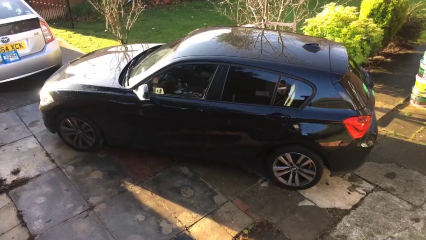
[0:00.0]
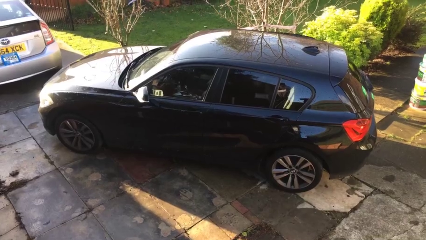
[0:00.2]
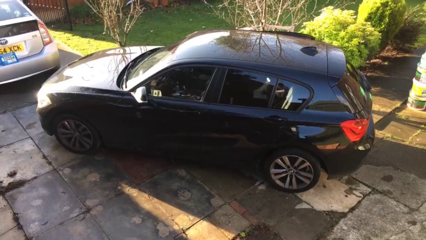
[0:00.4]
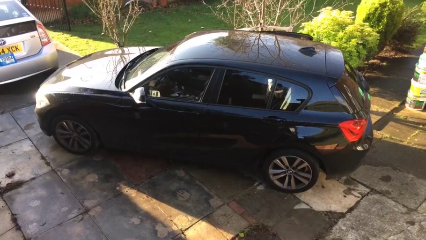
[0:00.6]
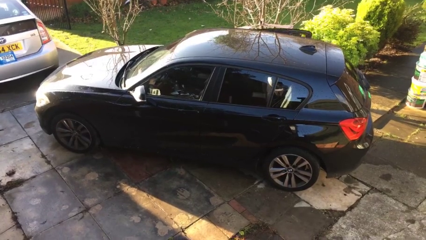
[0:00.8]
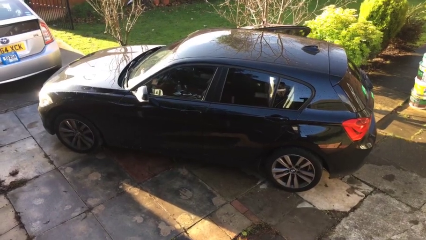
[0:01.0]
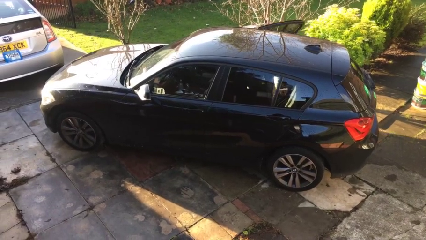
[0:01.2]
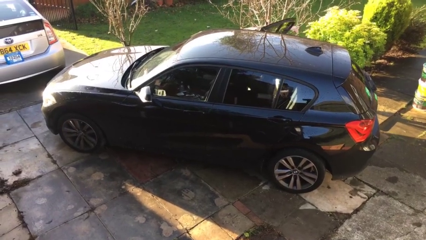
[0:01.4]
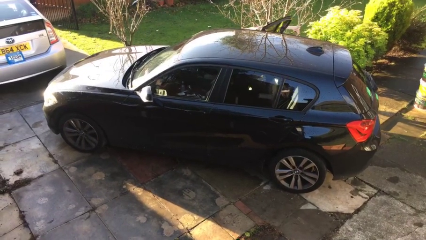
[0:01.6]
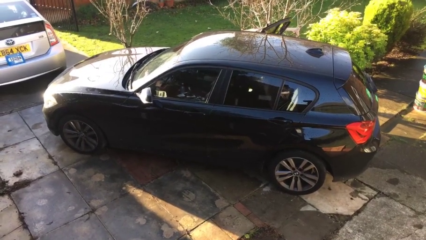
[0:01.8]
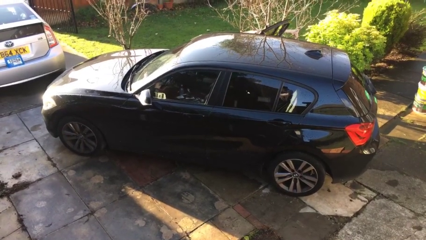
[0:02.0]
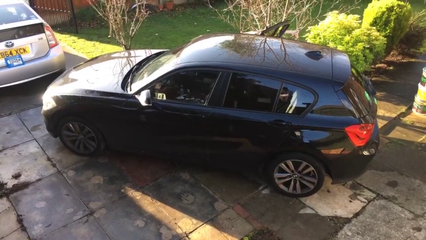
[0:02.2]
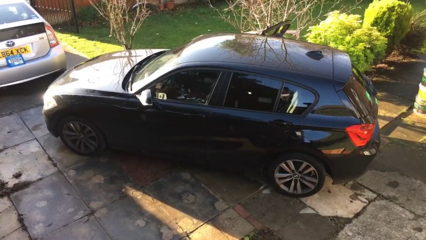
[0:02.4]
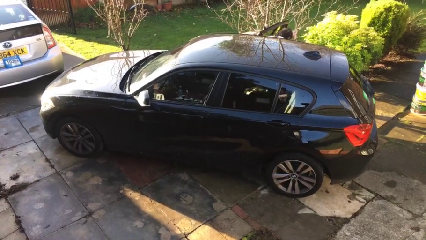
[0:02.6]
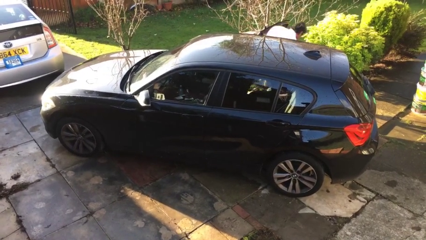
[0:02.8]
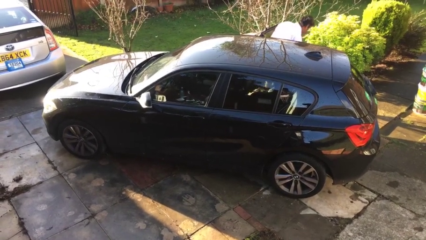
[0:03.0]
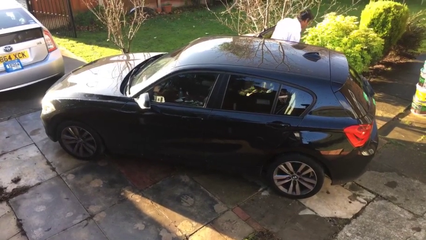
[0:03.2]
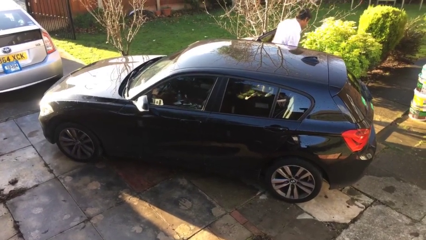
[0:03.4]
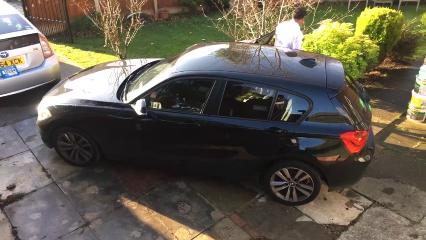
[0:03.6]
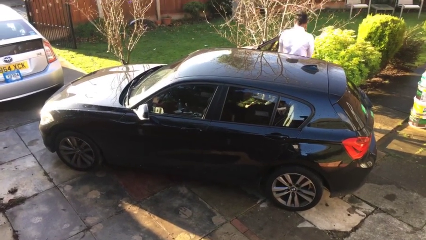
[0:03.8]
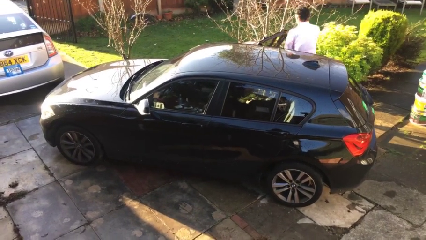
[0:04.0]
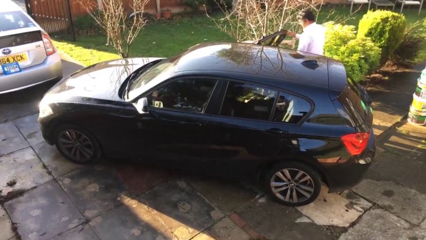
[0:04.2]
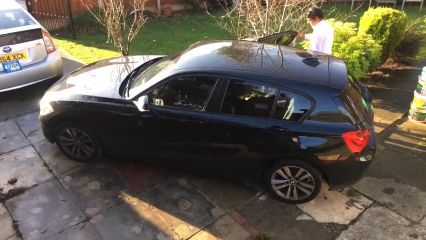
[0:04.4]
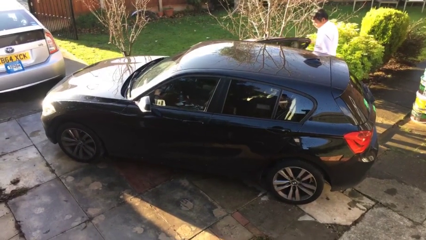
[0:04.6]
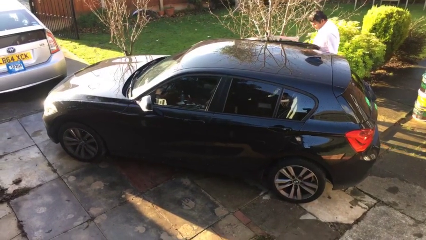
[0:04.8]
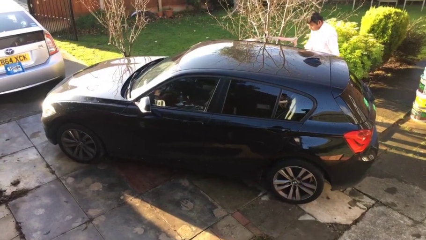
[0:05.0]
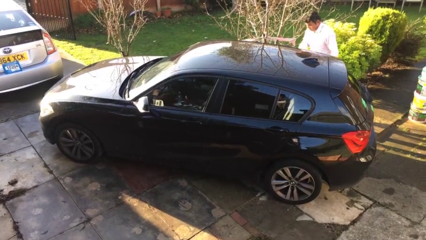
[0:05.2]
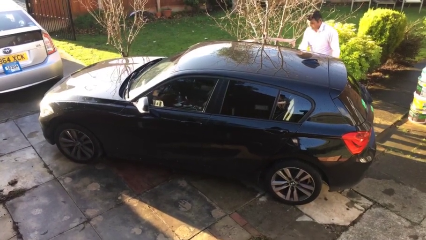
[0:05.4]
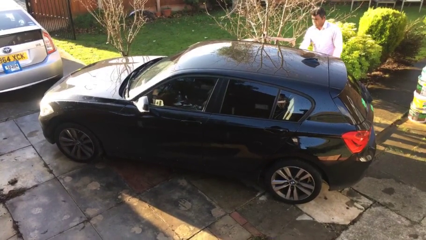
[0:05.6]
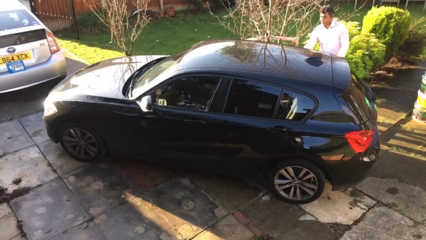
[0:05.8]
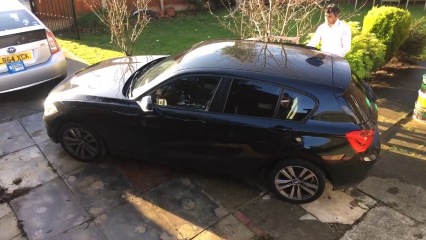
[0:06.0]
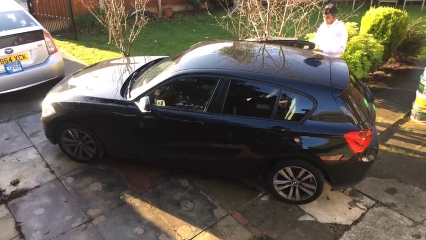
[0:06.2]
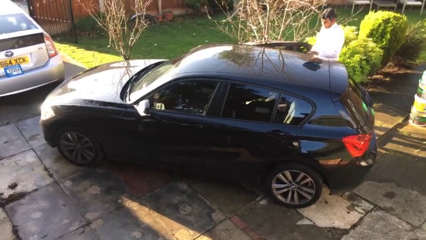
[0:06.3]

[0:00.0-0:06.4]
car drops off person

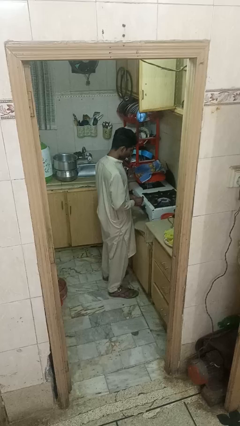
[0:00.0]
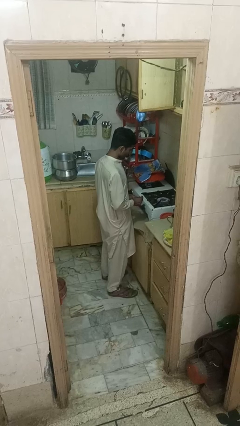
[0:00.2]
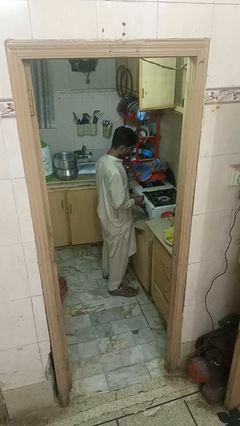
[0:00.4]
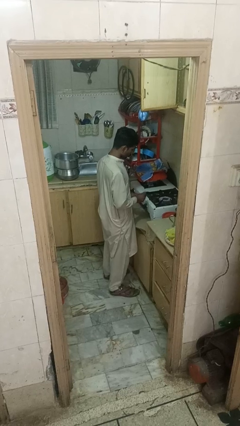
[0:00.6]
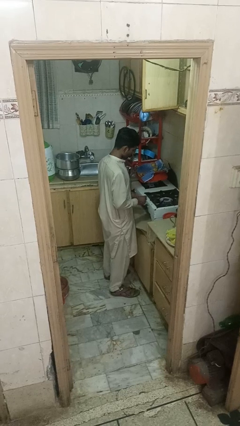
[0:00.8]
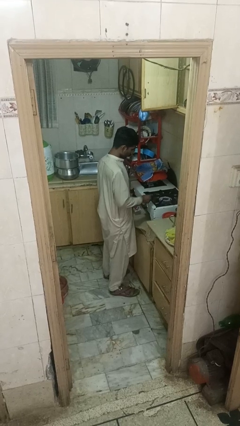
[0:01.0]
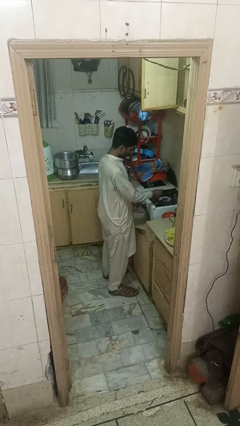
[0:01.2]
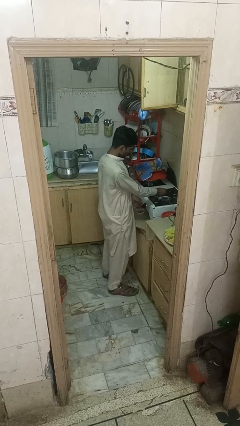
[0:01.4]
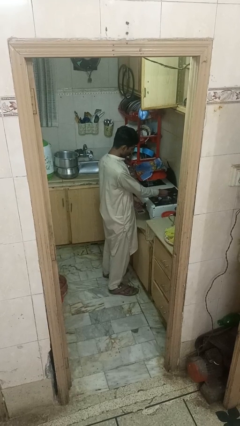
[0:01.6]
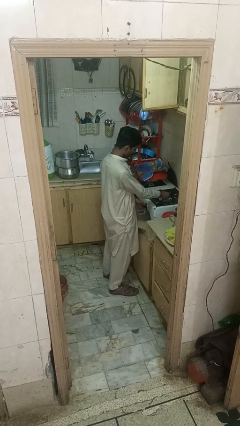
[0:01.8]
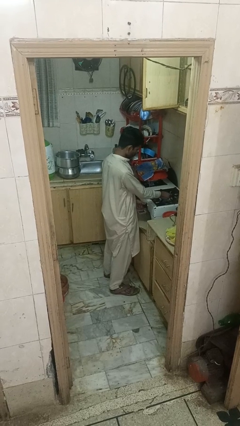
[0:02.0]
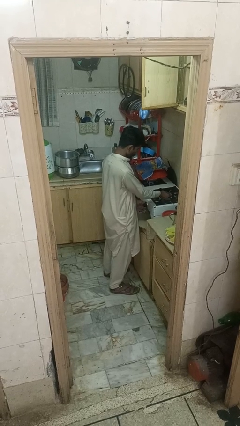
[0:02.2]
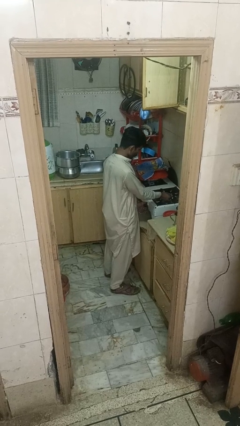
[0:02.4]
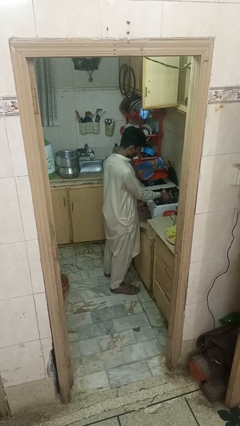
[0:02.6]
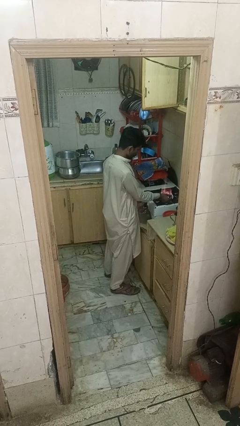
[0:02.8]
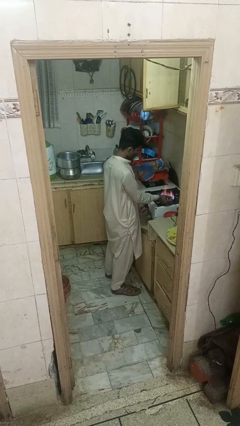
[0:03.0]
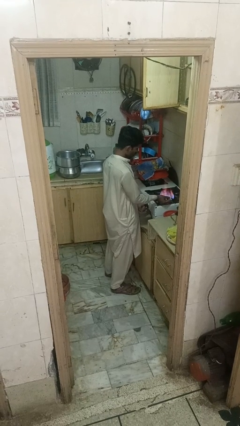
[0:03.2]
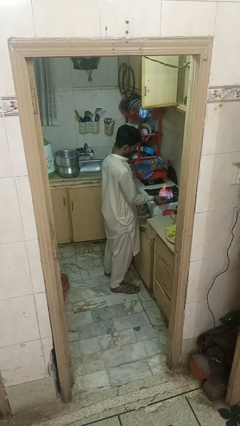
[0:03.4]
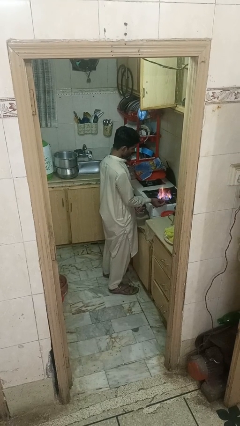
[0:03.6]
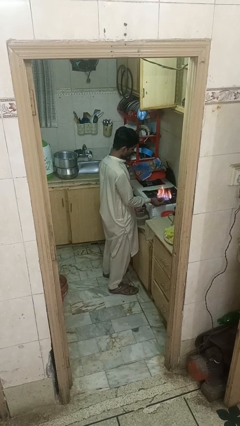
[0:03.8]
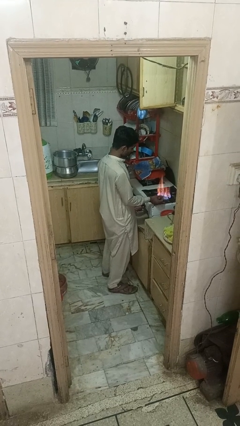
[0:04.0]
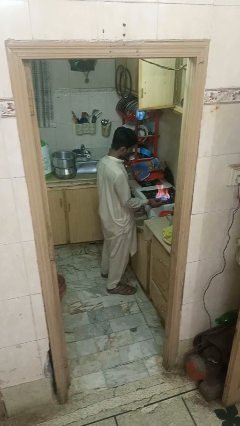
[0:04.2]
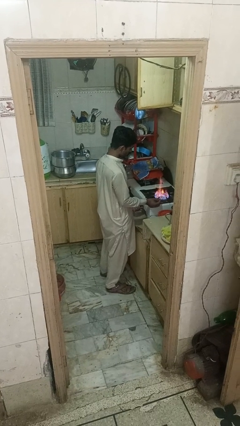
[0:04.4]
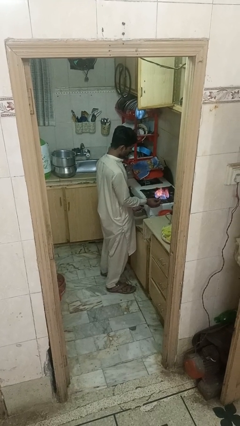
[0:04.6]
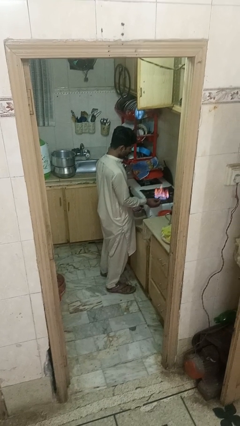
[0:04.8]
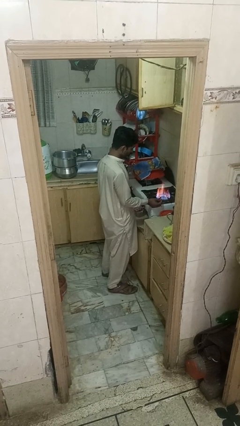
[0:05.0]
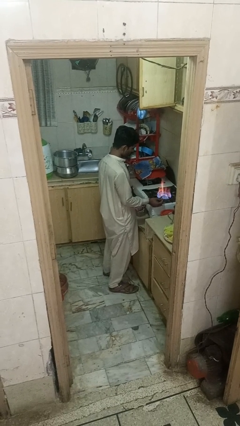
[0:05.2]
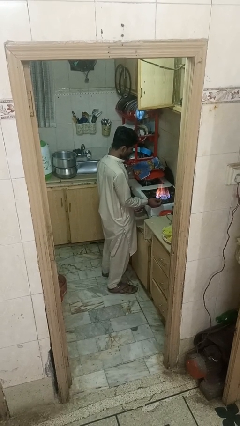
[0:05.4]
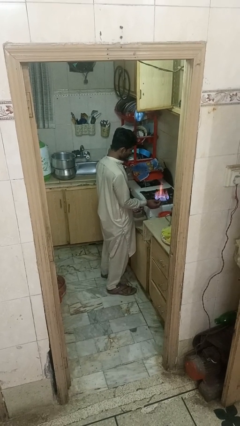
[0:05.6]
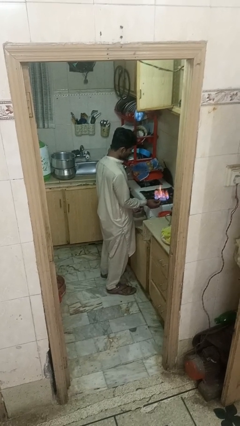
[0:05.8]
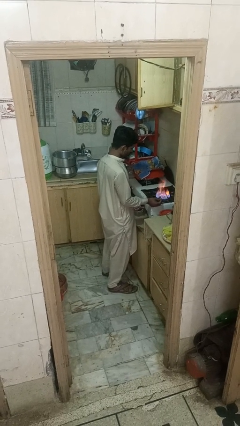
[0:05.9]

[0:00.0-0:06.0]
person turns on stovetop

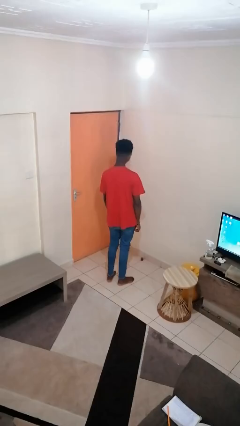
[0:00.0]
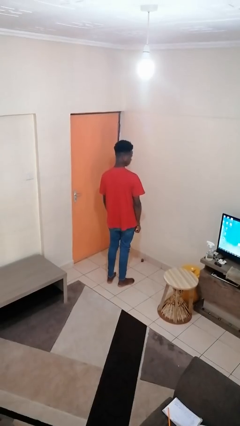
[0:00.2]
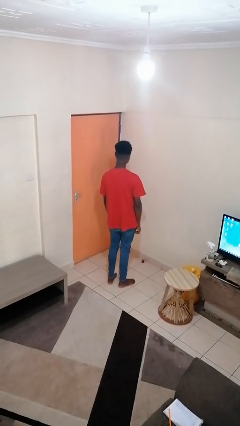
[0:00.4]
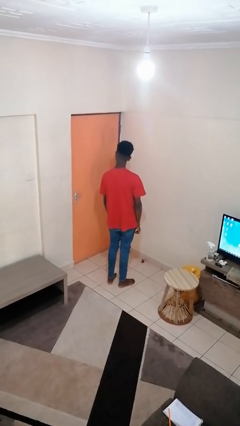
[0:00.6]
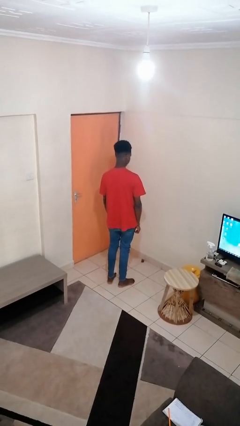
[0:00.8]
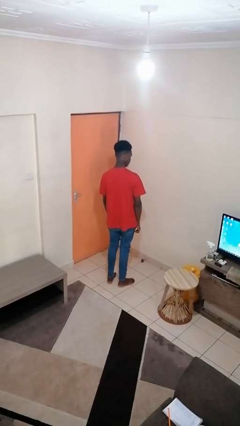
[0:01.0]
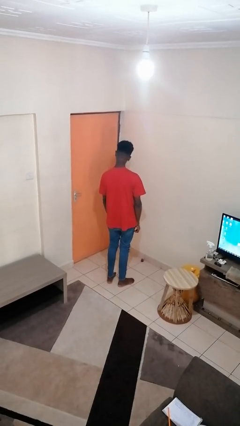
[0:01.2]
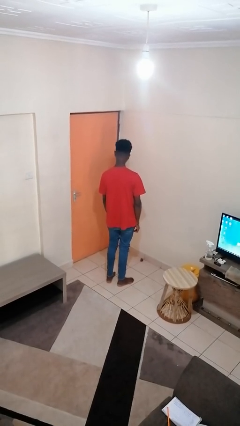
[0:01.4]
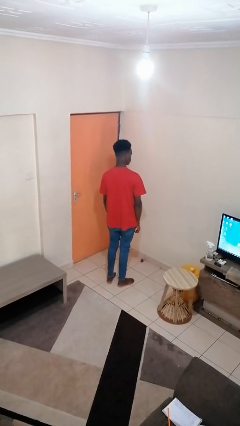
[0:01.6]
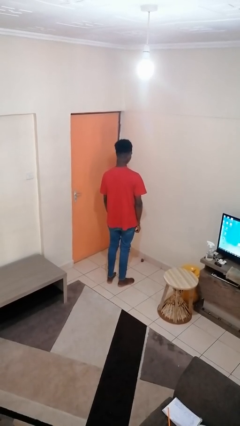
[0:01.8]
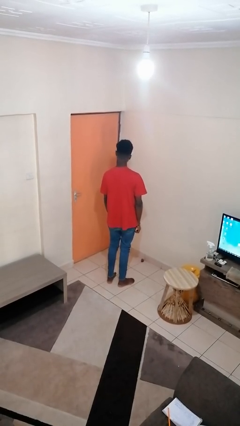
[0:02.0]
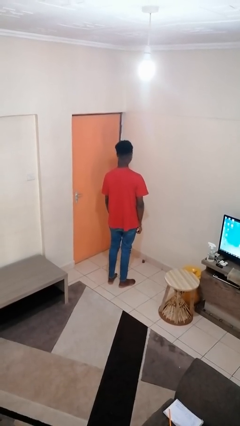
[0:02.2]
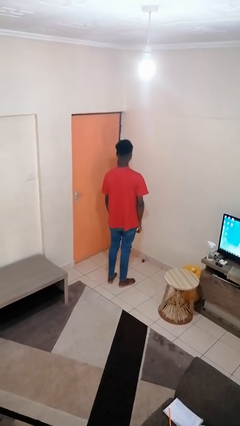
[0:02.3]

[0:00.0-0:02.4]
person shakes head

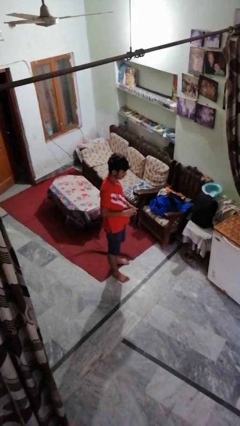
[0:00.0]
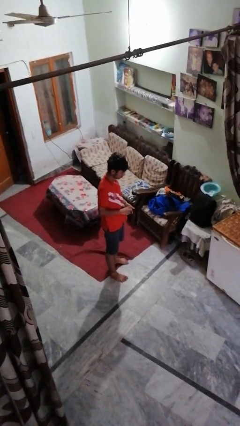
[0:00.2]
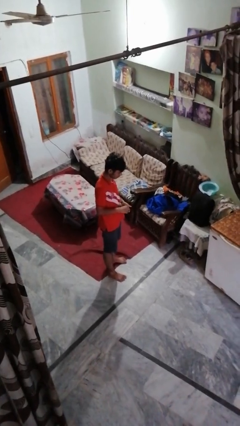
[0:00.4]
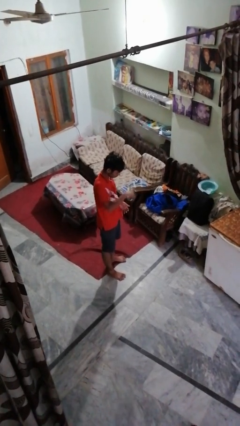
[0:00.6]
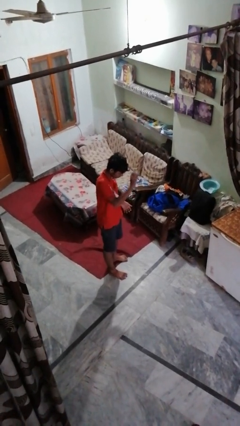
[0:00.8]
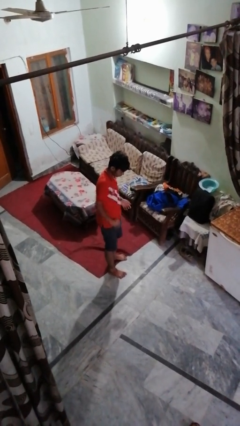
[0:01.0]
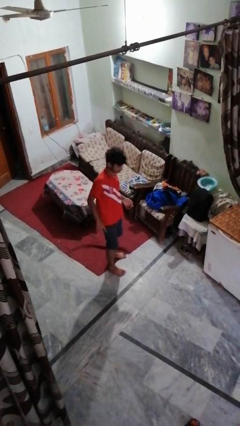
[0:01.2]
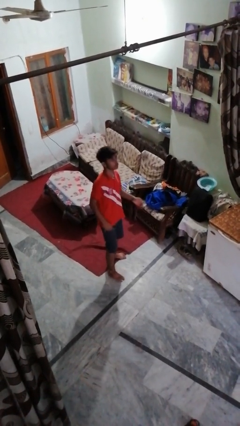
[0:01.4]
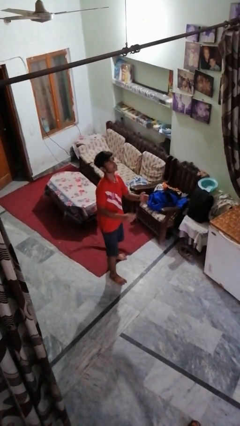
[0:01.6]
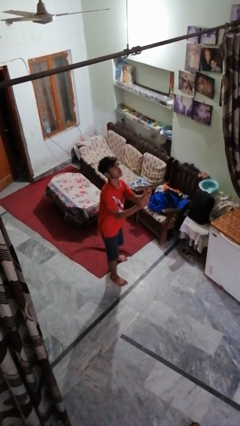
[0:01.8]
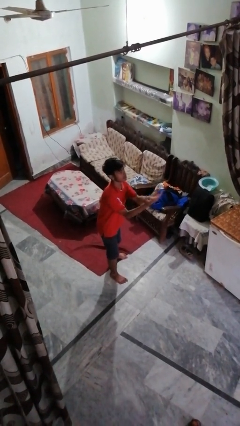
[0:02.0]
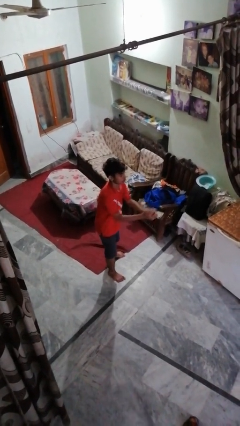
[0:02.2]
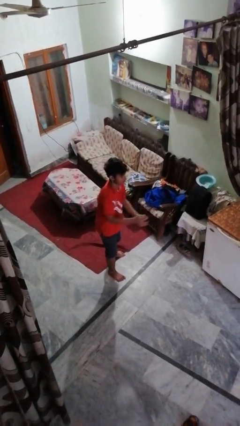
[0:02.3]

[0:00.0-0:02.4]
person bounces ball on floor

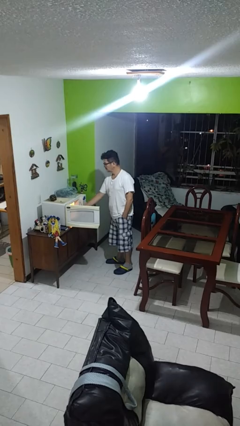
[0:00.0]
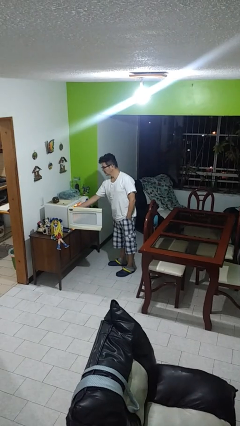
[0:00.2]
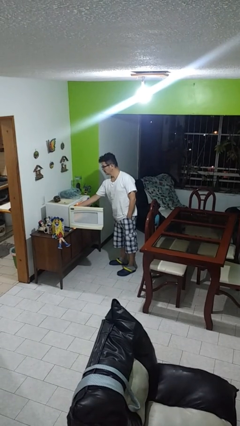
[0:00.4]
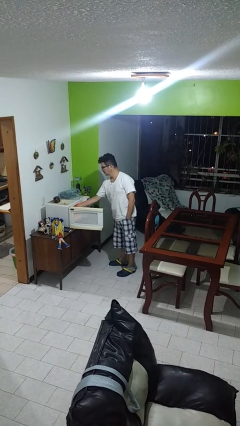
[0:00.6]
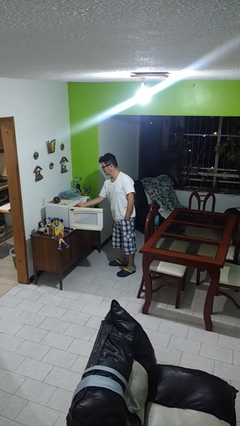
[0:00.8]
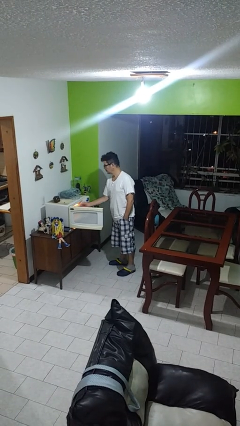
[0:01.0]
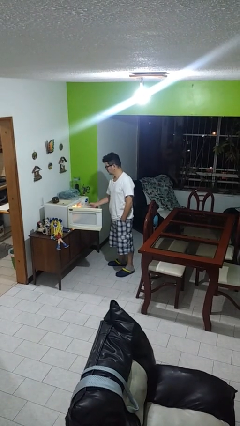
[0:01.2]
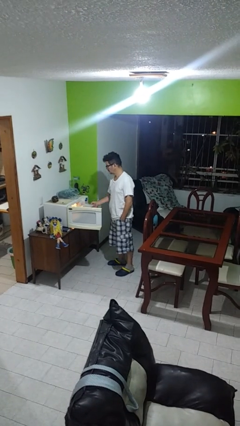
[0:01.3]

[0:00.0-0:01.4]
person takes object from microwave
